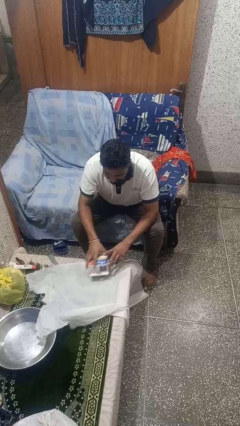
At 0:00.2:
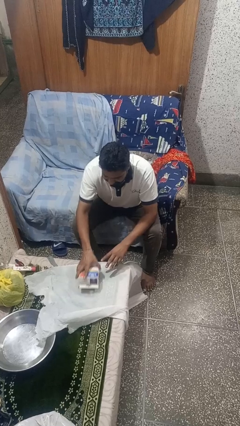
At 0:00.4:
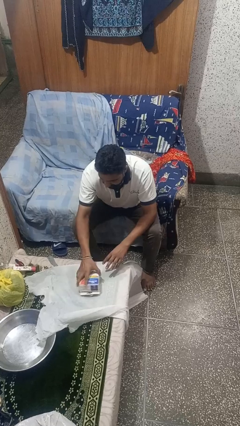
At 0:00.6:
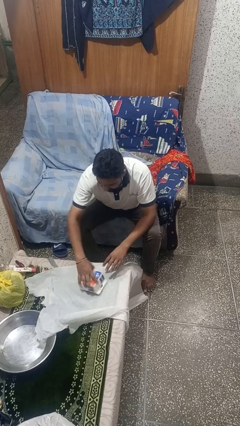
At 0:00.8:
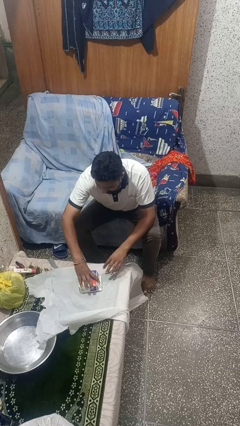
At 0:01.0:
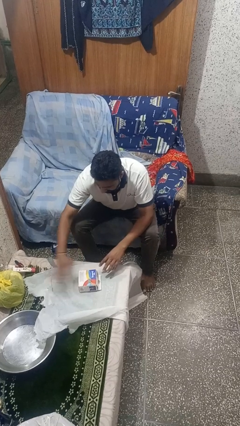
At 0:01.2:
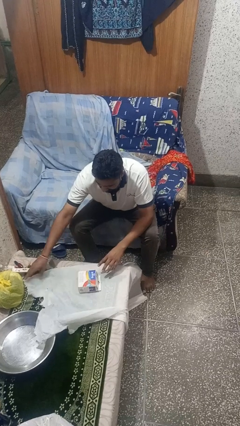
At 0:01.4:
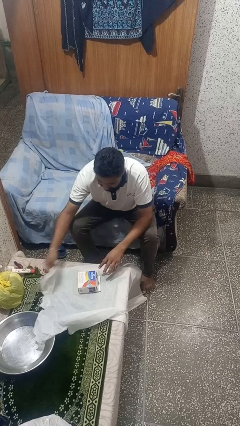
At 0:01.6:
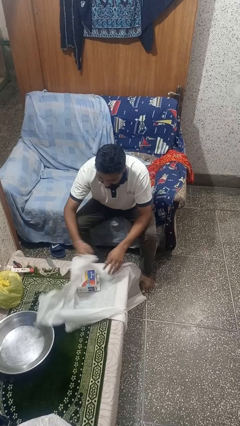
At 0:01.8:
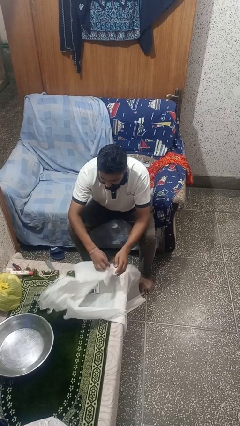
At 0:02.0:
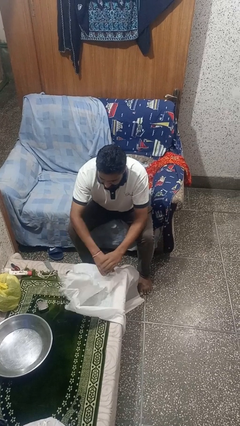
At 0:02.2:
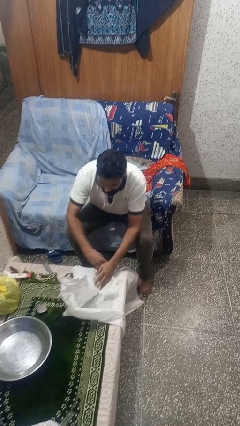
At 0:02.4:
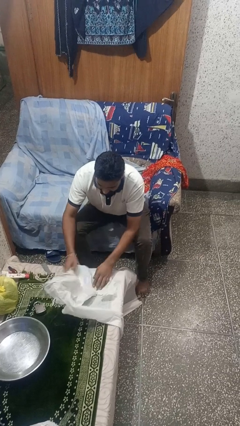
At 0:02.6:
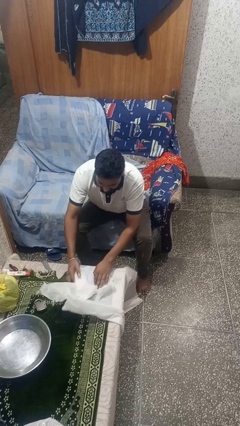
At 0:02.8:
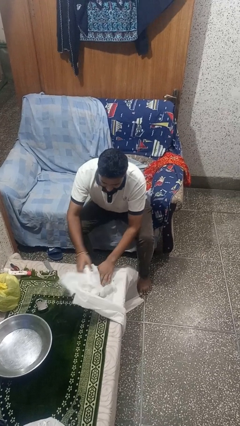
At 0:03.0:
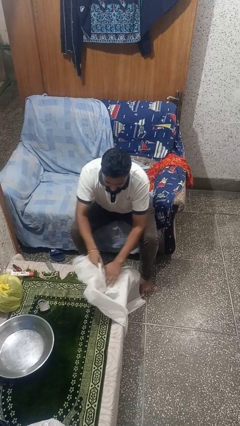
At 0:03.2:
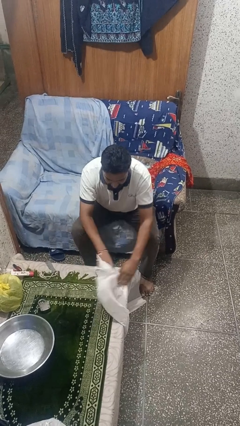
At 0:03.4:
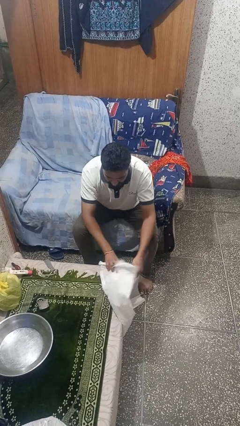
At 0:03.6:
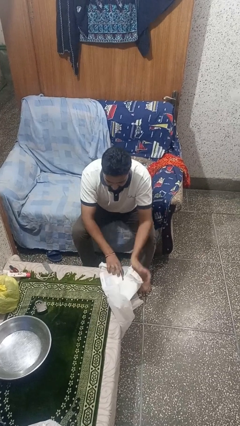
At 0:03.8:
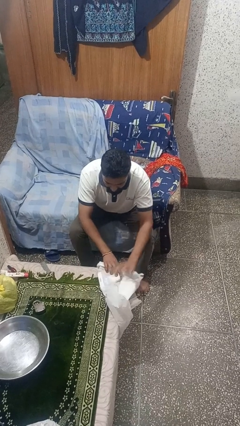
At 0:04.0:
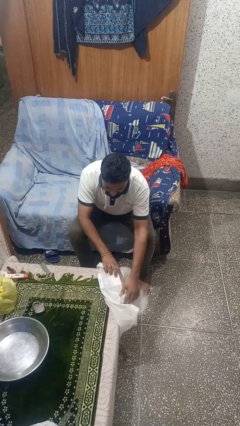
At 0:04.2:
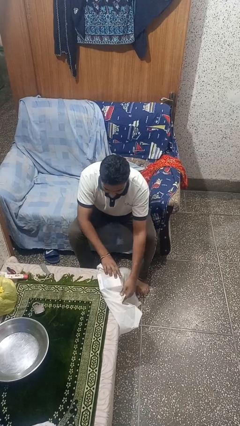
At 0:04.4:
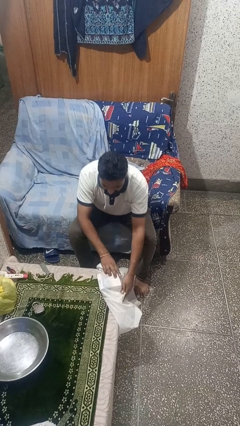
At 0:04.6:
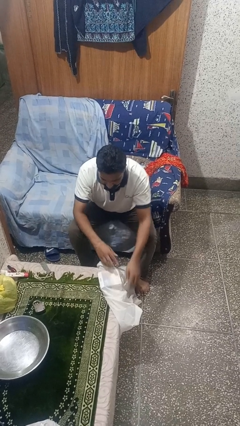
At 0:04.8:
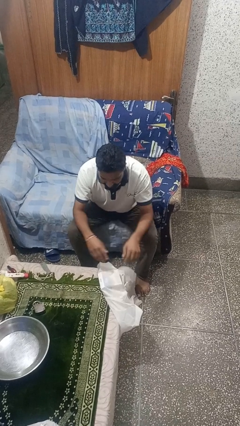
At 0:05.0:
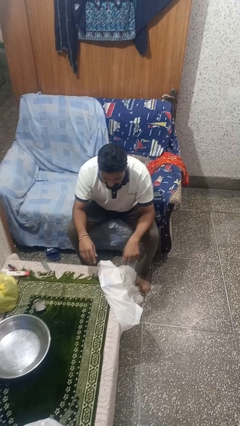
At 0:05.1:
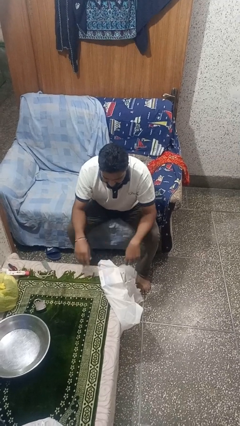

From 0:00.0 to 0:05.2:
person wraps box

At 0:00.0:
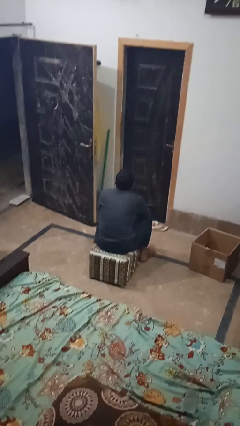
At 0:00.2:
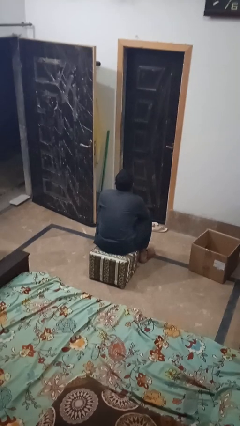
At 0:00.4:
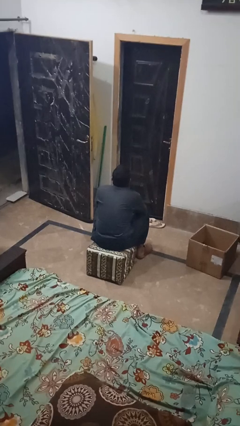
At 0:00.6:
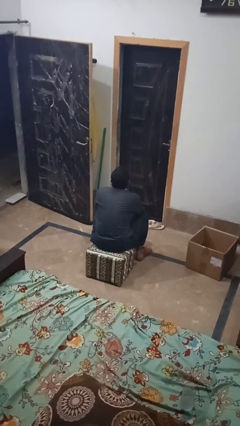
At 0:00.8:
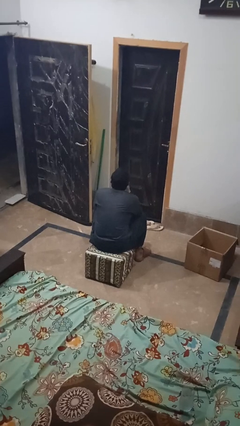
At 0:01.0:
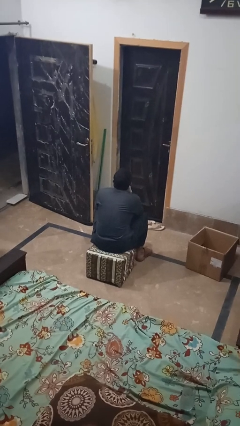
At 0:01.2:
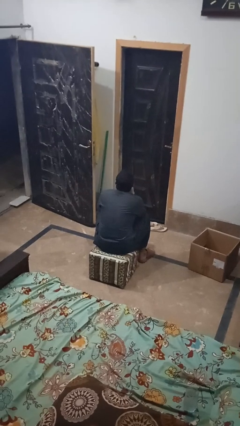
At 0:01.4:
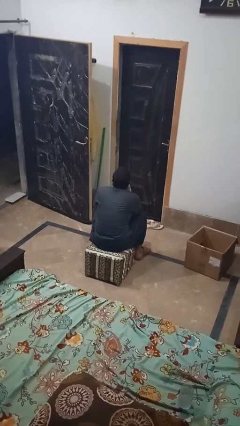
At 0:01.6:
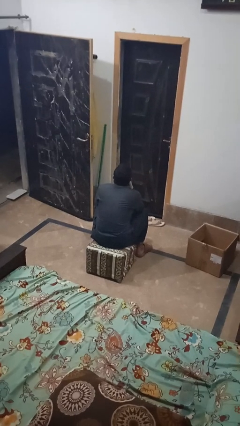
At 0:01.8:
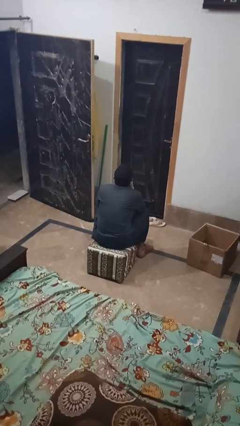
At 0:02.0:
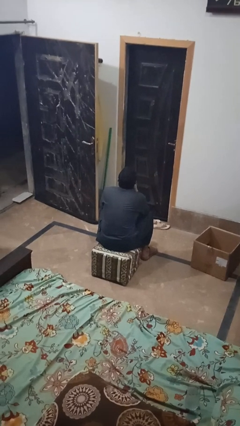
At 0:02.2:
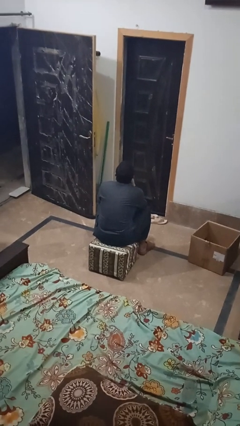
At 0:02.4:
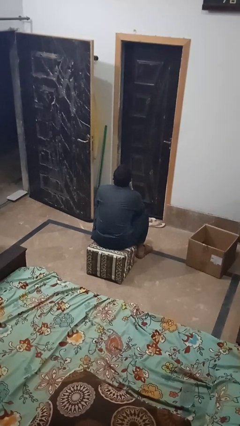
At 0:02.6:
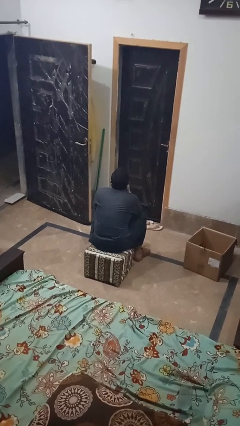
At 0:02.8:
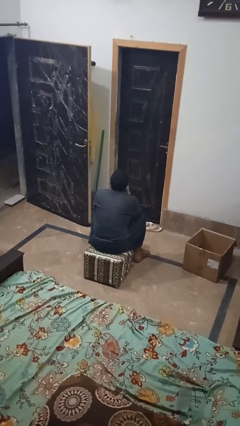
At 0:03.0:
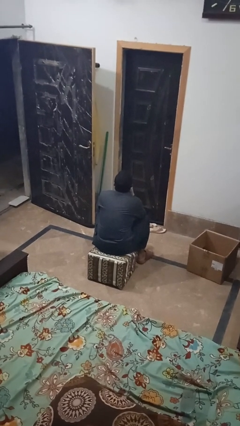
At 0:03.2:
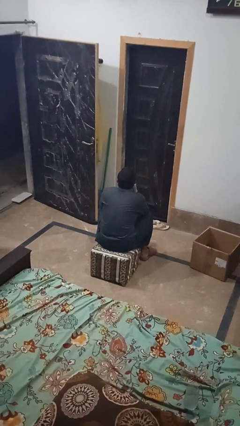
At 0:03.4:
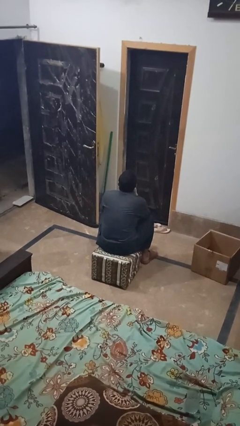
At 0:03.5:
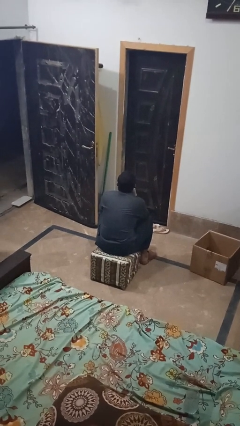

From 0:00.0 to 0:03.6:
person strokes chin

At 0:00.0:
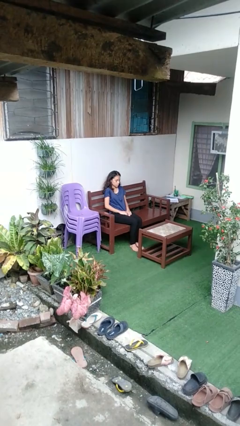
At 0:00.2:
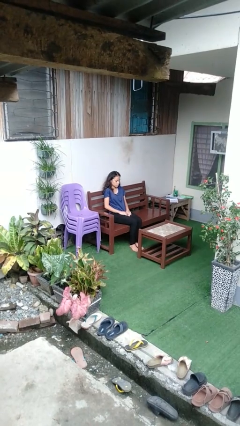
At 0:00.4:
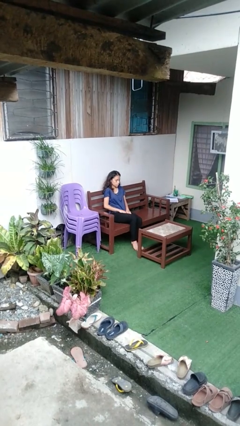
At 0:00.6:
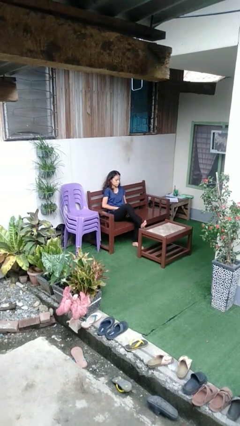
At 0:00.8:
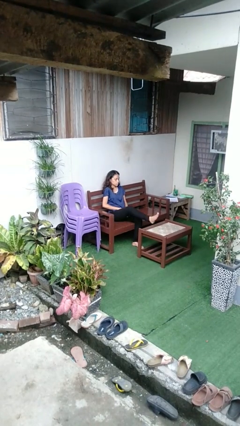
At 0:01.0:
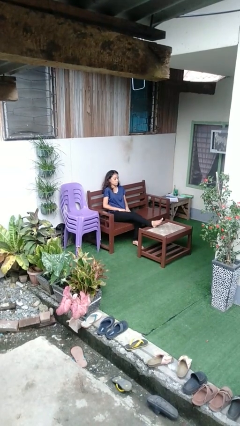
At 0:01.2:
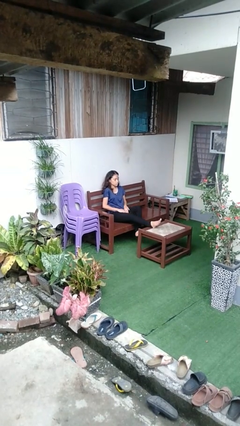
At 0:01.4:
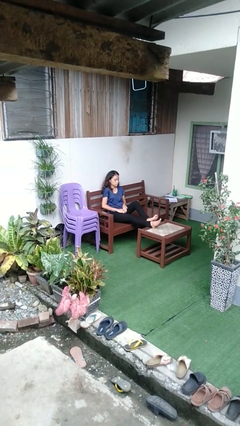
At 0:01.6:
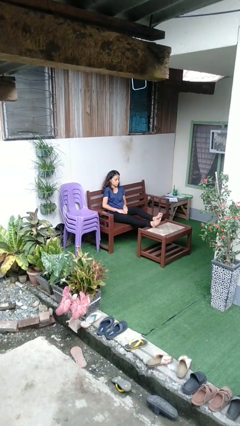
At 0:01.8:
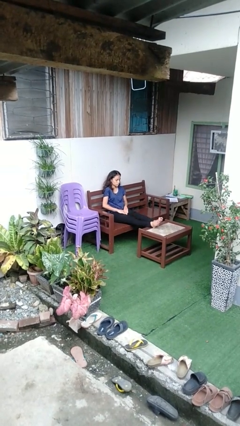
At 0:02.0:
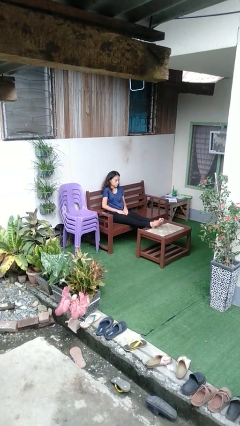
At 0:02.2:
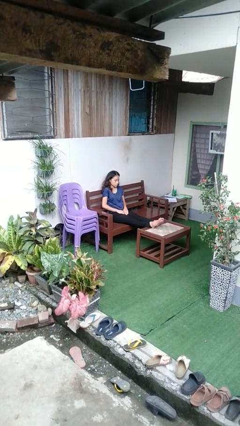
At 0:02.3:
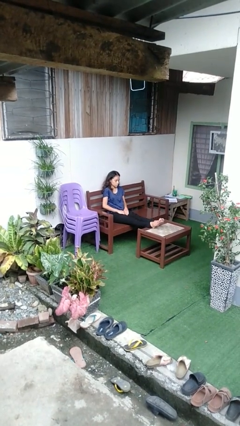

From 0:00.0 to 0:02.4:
person puts feet up

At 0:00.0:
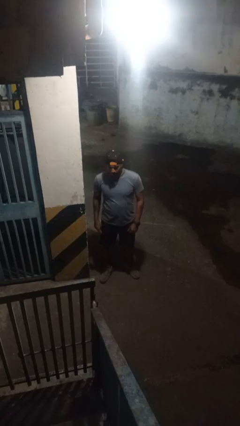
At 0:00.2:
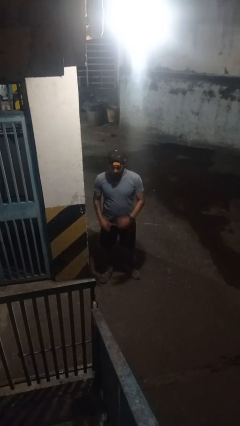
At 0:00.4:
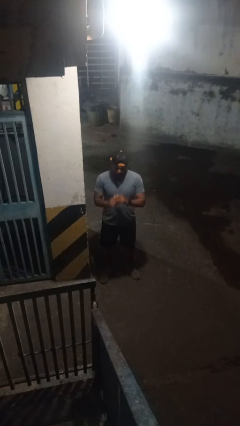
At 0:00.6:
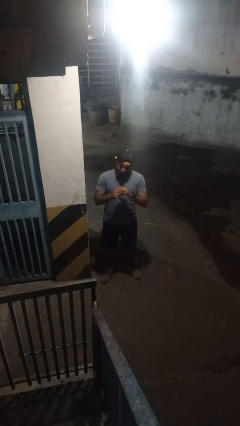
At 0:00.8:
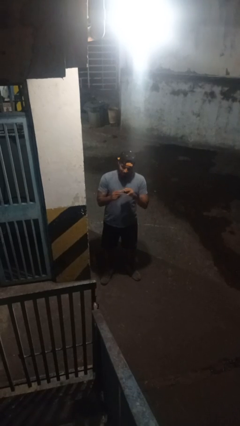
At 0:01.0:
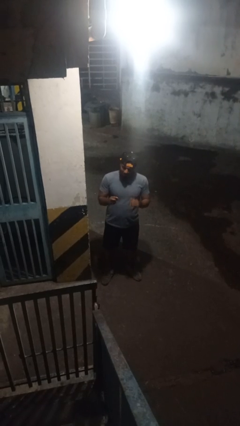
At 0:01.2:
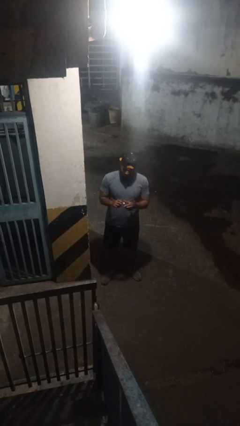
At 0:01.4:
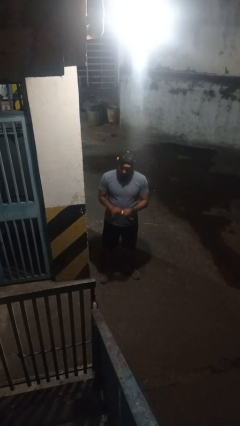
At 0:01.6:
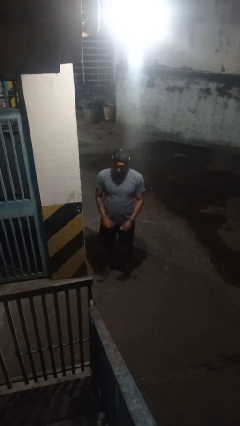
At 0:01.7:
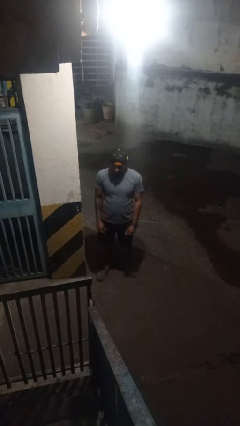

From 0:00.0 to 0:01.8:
person takes off ring

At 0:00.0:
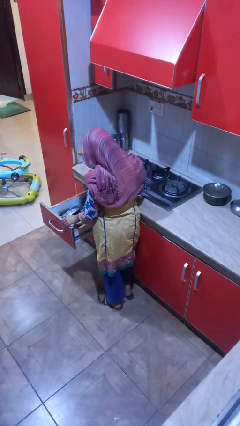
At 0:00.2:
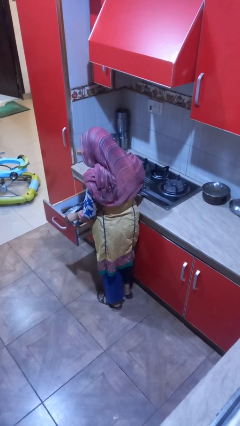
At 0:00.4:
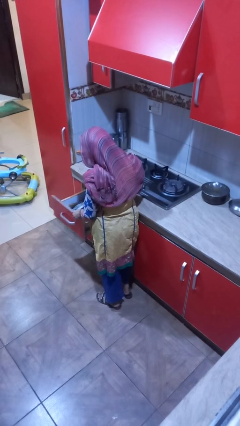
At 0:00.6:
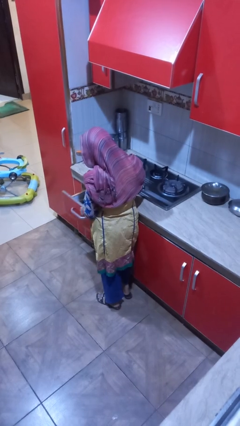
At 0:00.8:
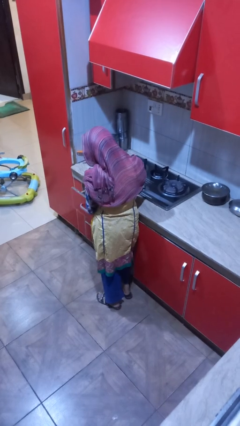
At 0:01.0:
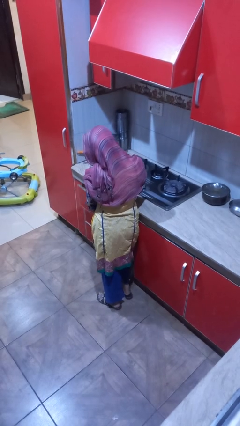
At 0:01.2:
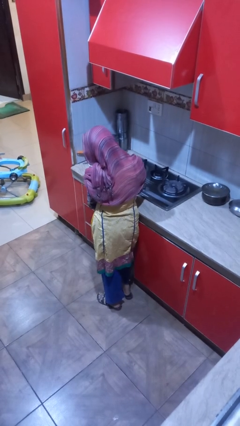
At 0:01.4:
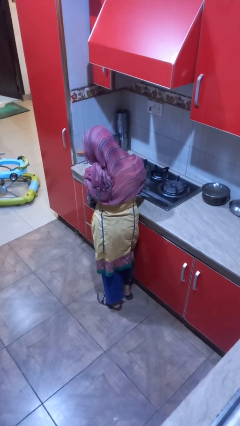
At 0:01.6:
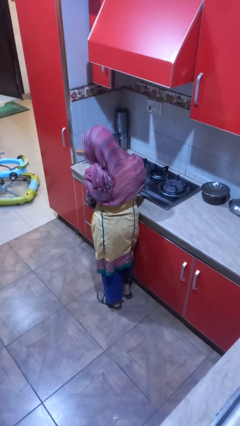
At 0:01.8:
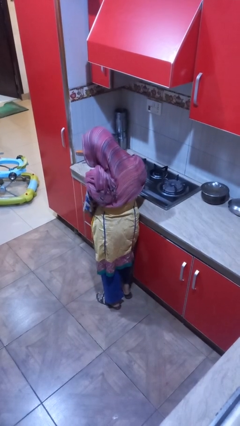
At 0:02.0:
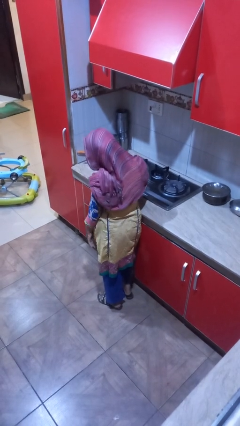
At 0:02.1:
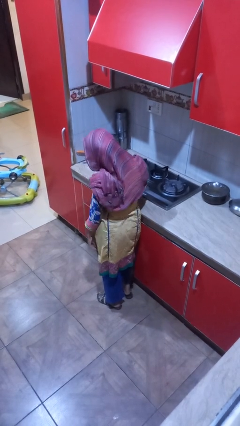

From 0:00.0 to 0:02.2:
person closes kitchen drawer

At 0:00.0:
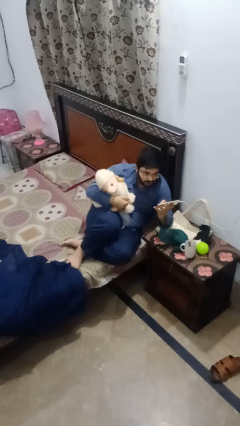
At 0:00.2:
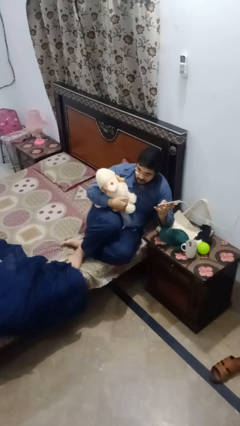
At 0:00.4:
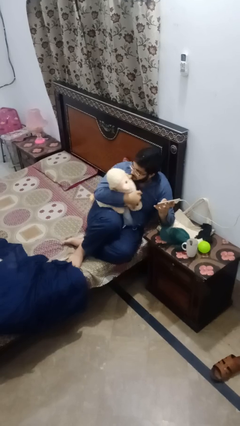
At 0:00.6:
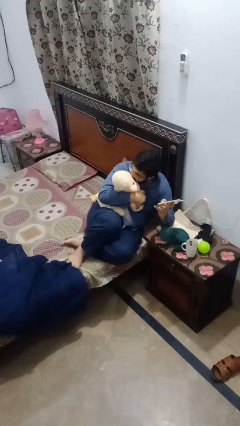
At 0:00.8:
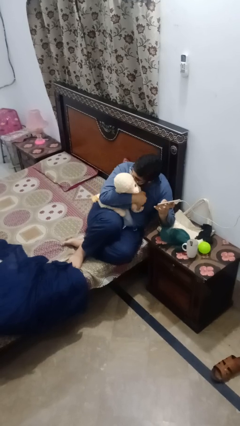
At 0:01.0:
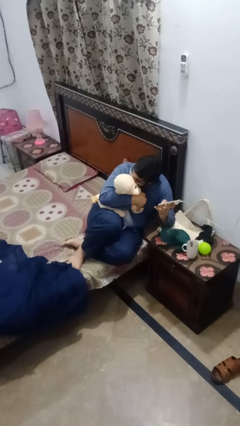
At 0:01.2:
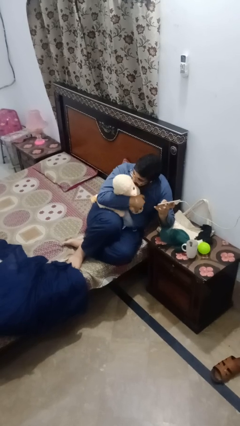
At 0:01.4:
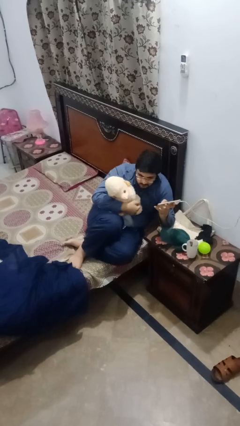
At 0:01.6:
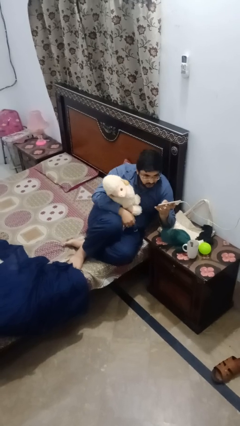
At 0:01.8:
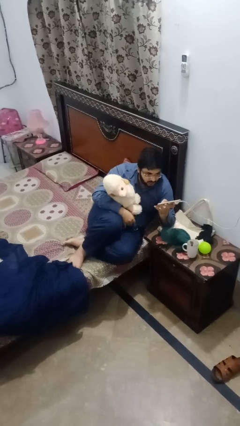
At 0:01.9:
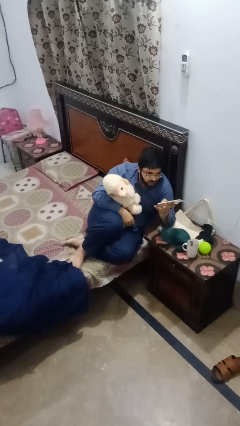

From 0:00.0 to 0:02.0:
person hugs stuffed animal

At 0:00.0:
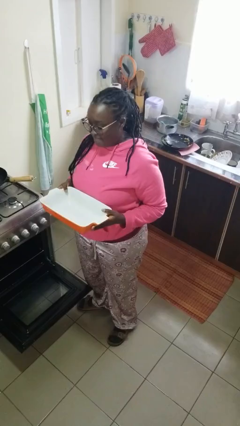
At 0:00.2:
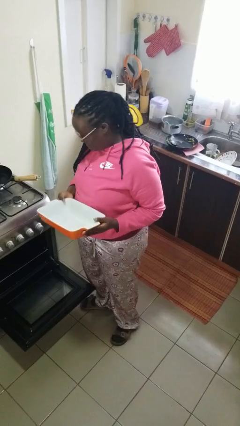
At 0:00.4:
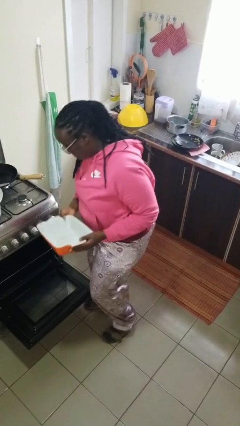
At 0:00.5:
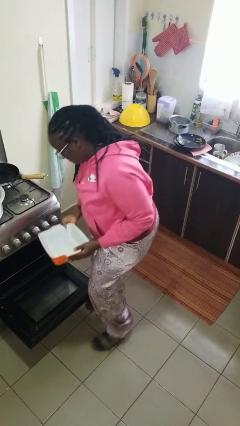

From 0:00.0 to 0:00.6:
person puts object into oven
